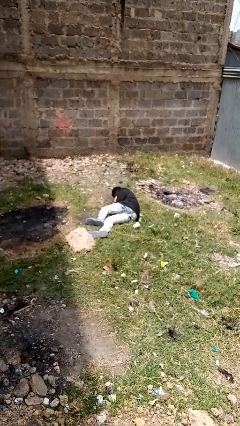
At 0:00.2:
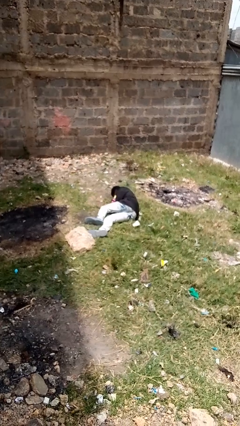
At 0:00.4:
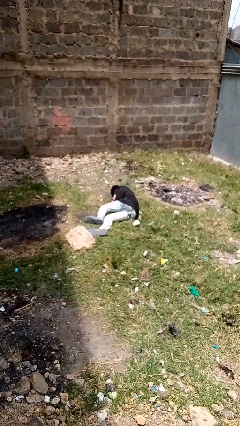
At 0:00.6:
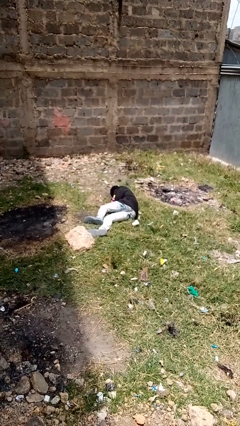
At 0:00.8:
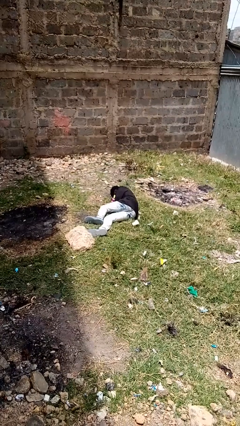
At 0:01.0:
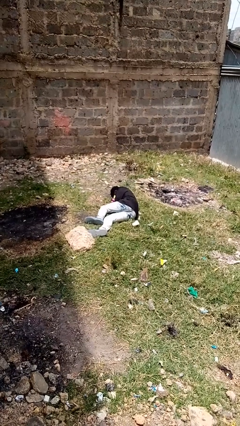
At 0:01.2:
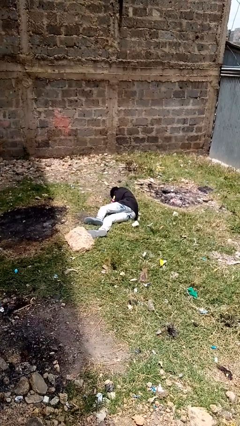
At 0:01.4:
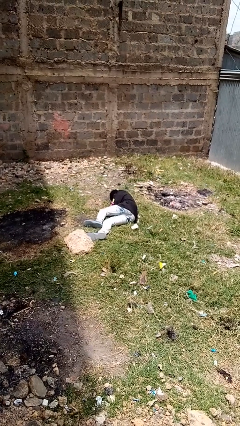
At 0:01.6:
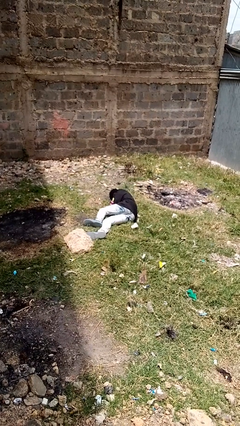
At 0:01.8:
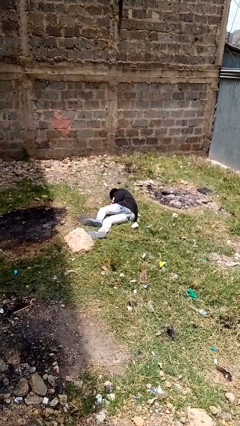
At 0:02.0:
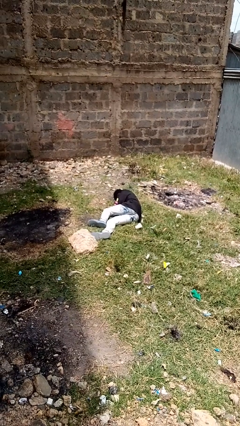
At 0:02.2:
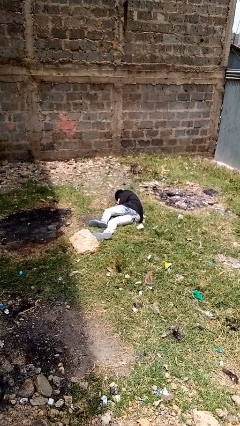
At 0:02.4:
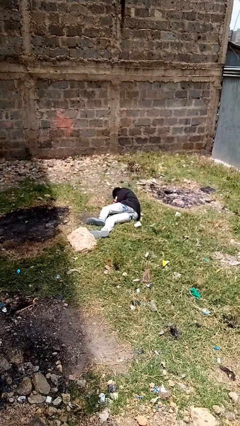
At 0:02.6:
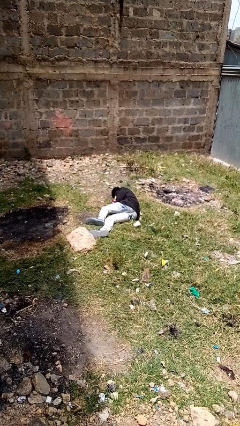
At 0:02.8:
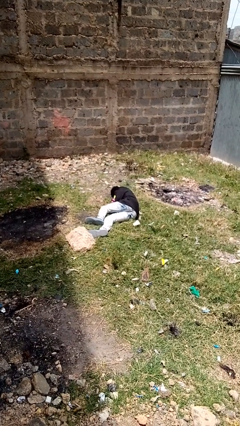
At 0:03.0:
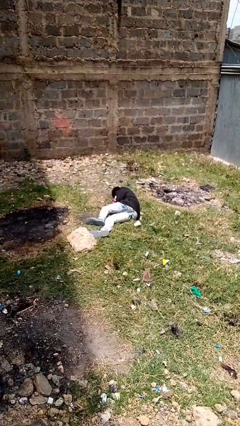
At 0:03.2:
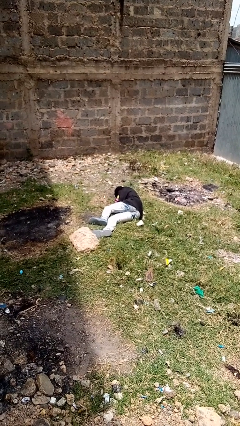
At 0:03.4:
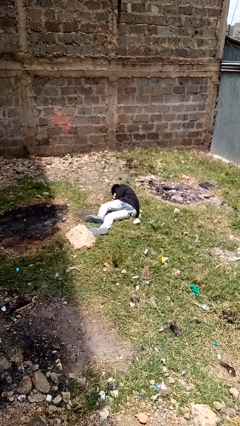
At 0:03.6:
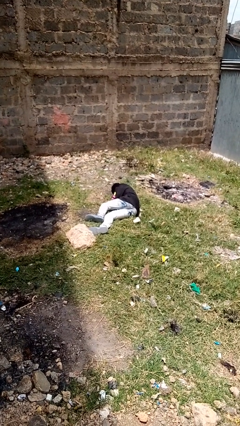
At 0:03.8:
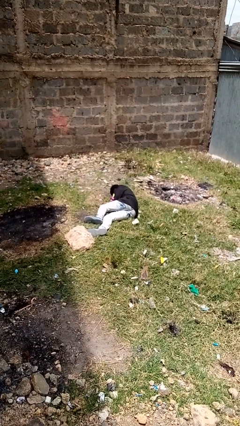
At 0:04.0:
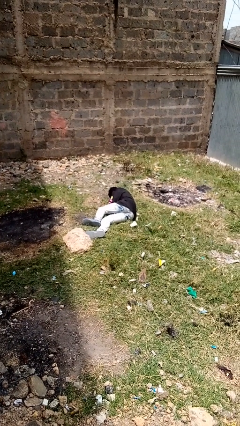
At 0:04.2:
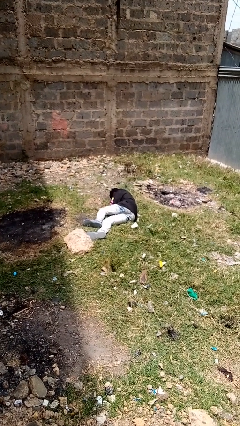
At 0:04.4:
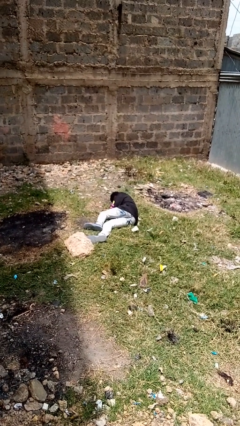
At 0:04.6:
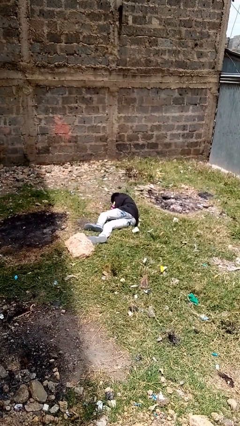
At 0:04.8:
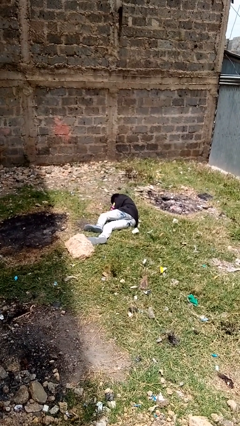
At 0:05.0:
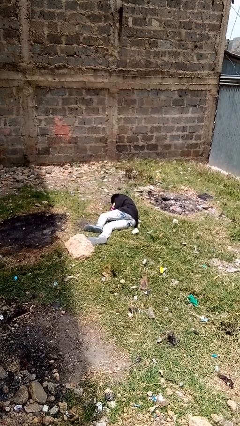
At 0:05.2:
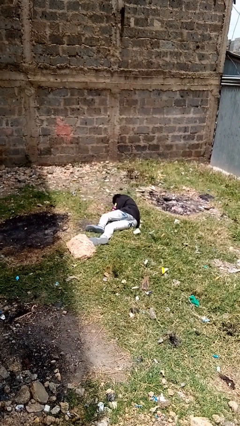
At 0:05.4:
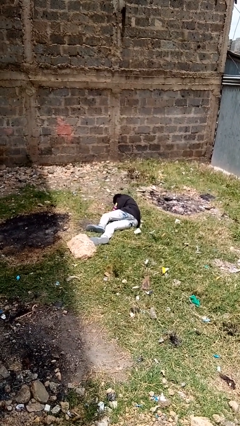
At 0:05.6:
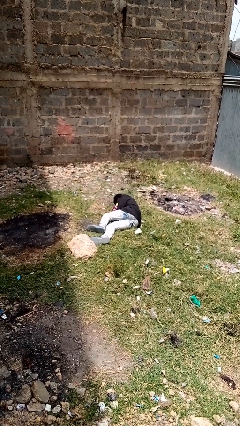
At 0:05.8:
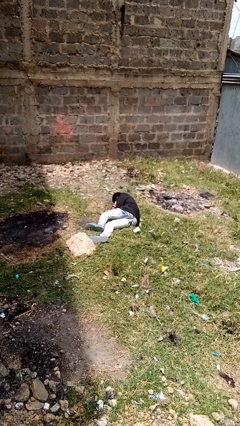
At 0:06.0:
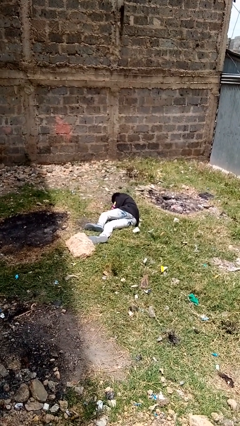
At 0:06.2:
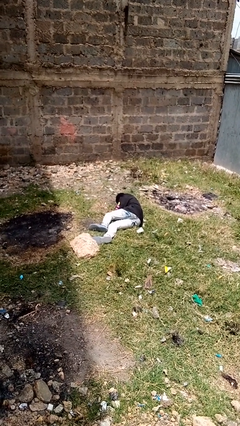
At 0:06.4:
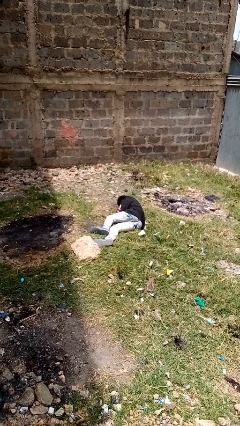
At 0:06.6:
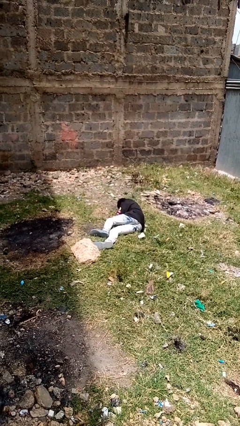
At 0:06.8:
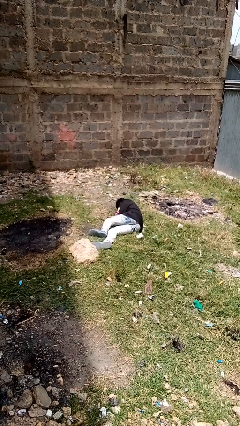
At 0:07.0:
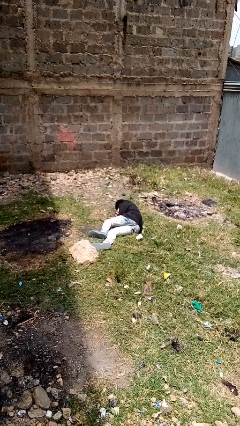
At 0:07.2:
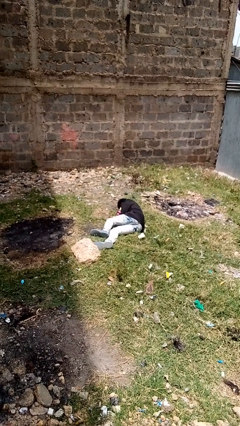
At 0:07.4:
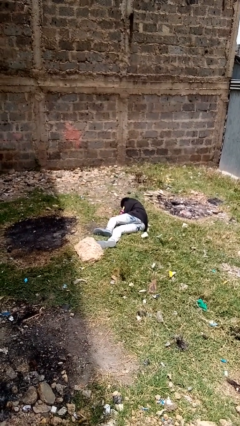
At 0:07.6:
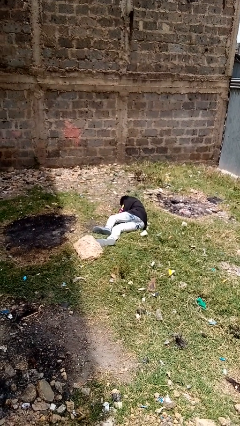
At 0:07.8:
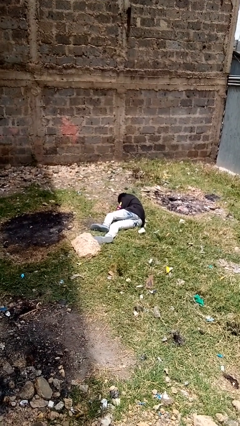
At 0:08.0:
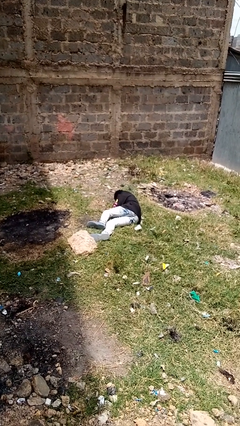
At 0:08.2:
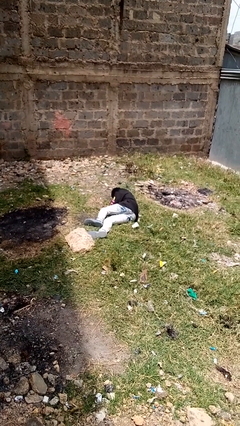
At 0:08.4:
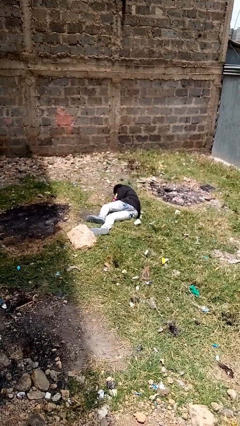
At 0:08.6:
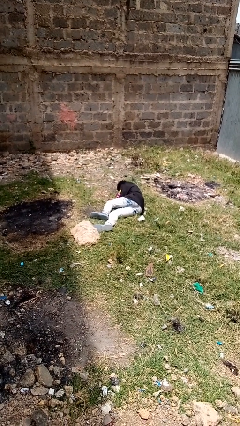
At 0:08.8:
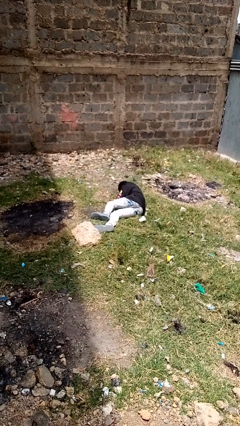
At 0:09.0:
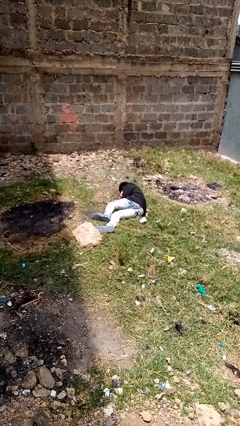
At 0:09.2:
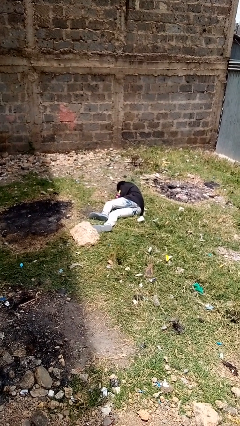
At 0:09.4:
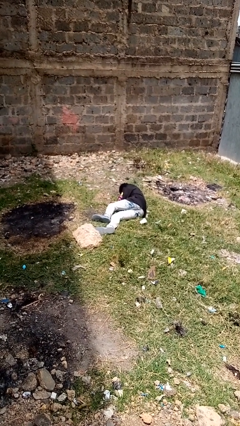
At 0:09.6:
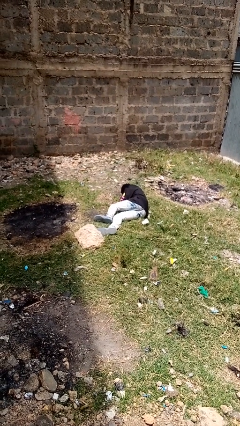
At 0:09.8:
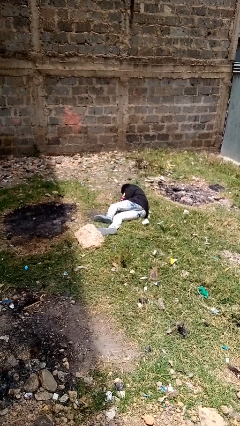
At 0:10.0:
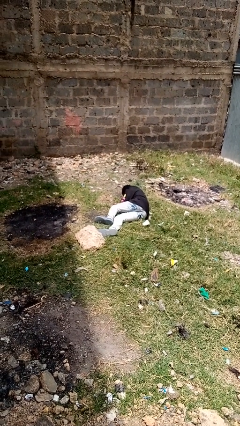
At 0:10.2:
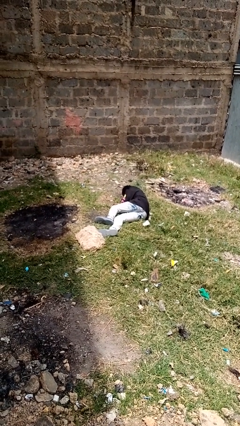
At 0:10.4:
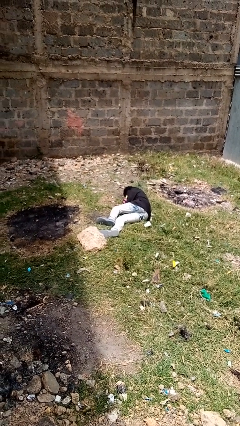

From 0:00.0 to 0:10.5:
person lies down on floor

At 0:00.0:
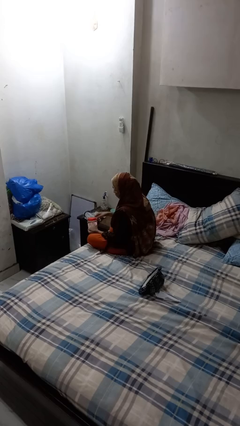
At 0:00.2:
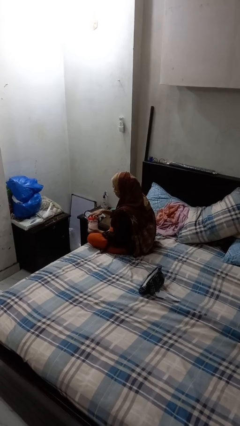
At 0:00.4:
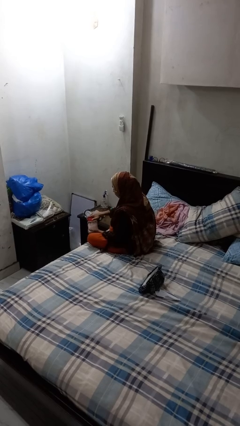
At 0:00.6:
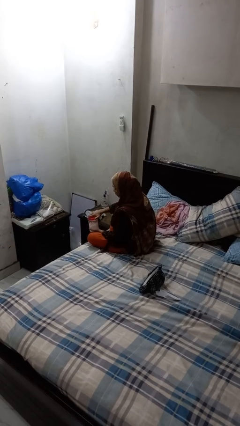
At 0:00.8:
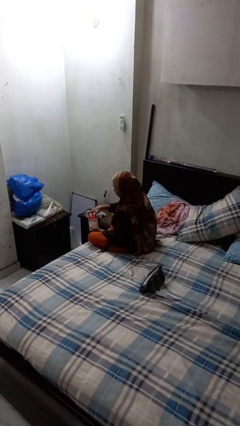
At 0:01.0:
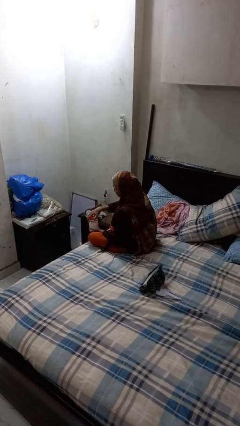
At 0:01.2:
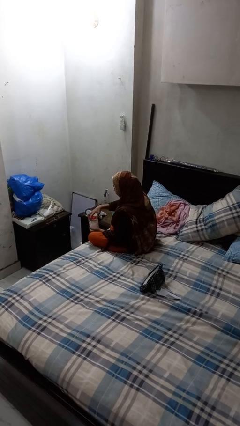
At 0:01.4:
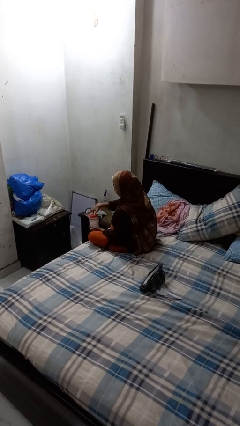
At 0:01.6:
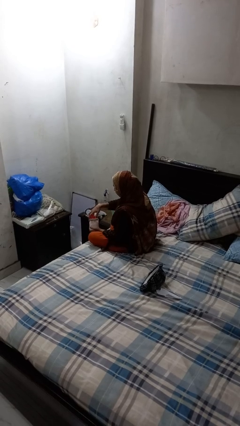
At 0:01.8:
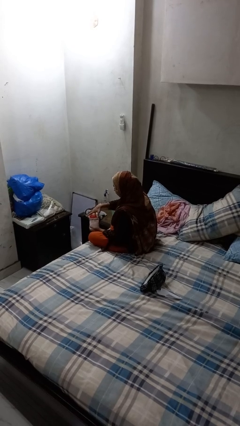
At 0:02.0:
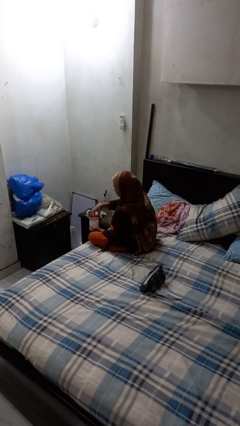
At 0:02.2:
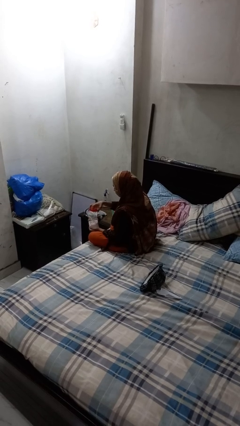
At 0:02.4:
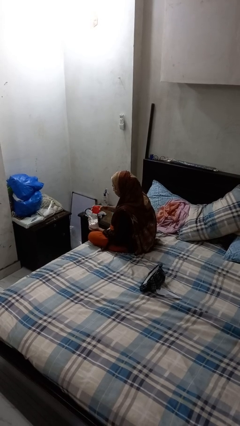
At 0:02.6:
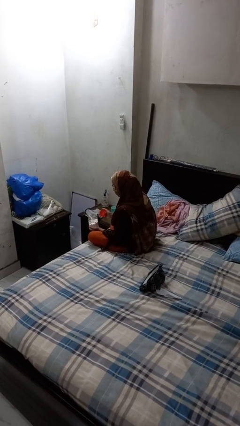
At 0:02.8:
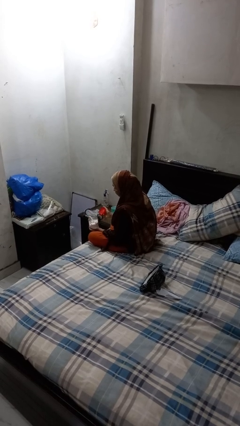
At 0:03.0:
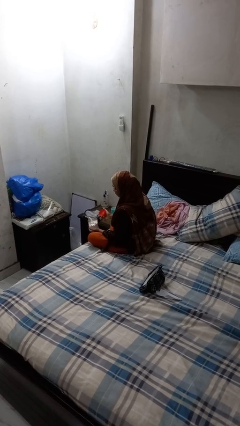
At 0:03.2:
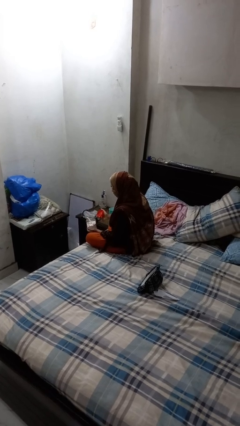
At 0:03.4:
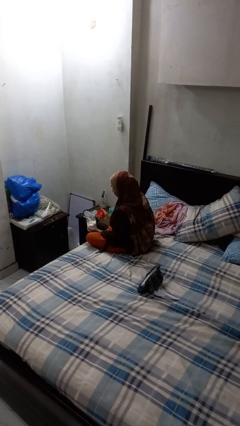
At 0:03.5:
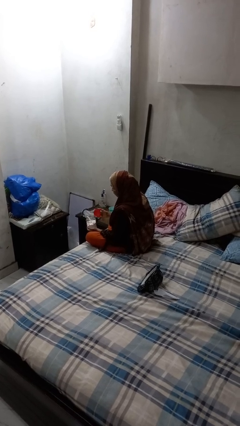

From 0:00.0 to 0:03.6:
person opens jar

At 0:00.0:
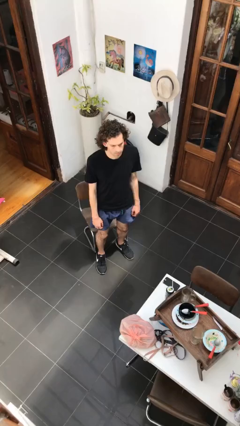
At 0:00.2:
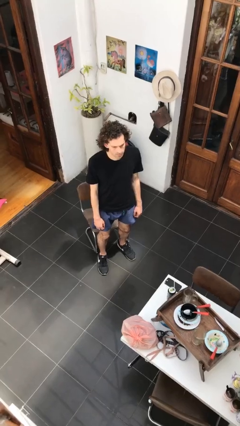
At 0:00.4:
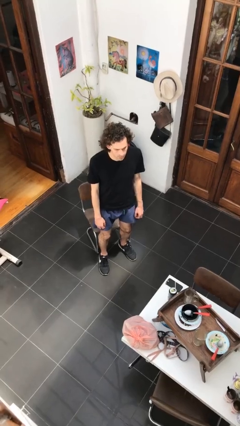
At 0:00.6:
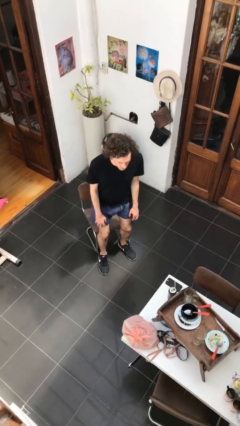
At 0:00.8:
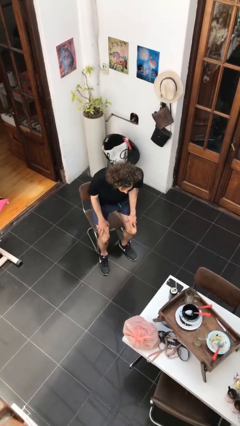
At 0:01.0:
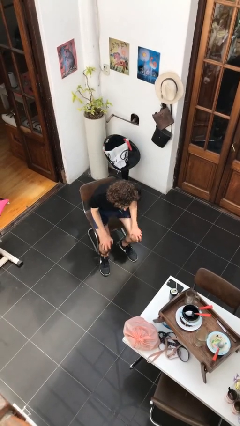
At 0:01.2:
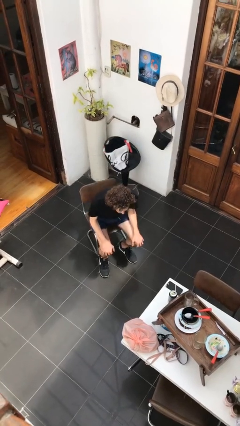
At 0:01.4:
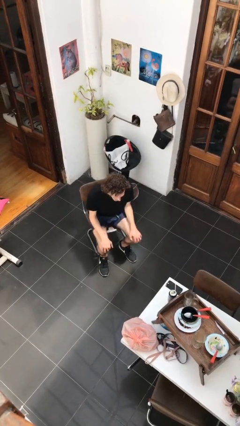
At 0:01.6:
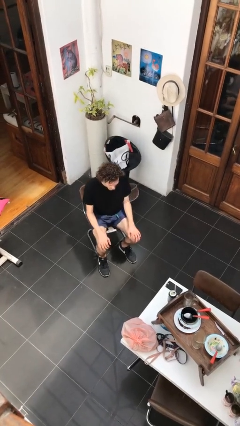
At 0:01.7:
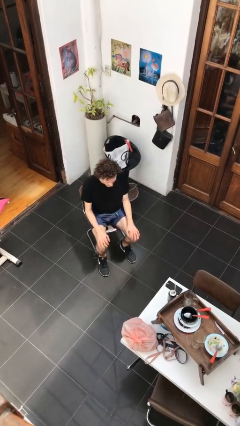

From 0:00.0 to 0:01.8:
person sits down

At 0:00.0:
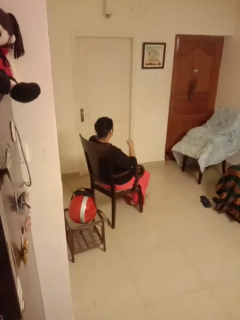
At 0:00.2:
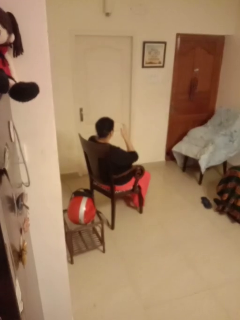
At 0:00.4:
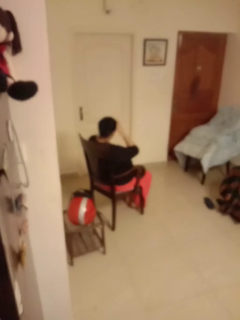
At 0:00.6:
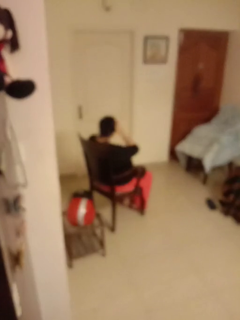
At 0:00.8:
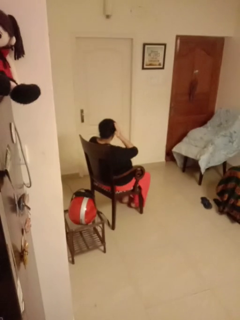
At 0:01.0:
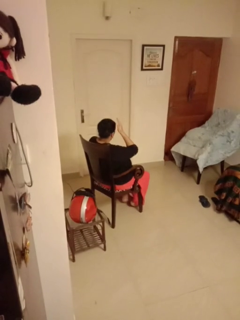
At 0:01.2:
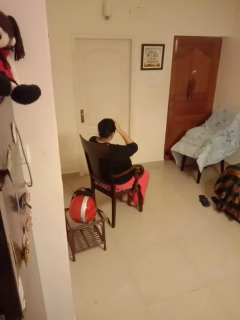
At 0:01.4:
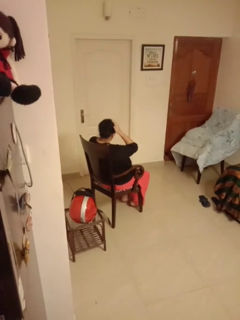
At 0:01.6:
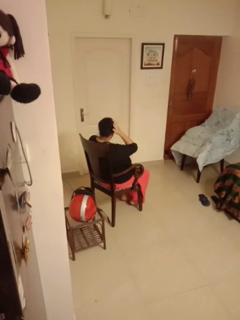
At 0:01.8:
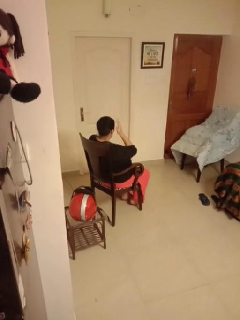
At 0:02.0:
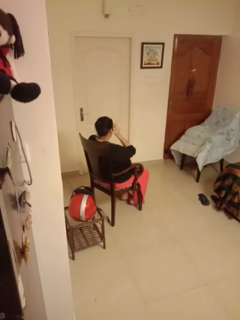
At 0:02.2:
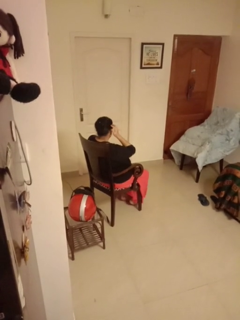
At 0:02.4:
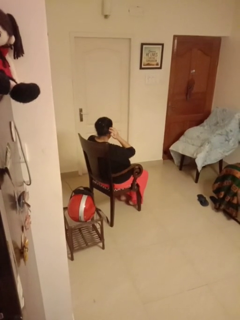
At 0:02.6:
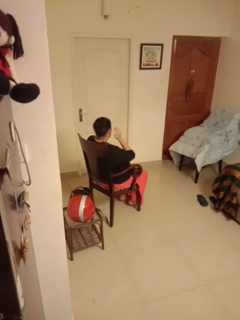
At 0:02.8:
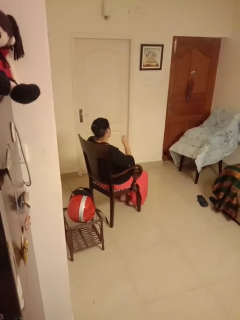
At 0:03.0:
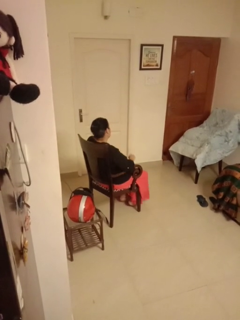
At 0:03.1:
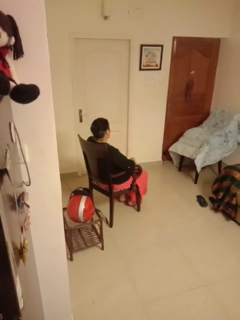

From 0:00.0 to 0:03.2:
person strokes hair
